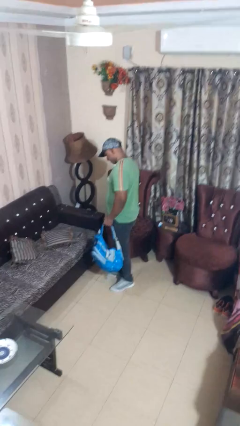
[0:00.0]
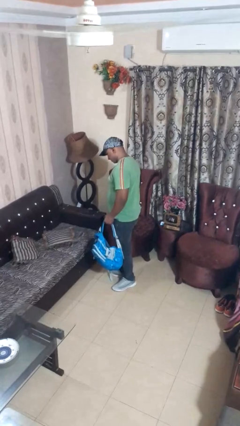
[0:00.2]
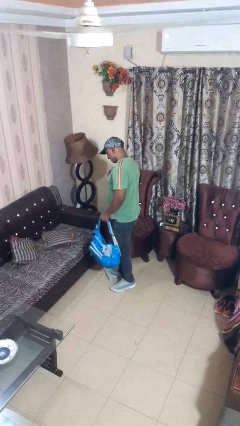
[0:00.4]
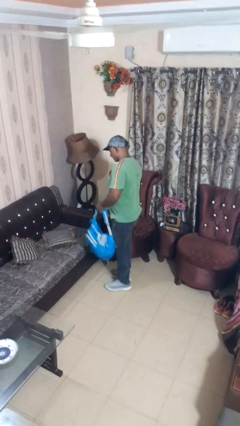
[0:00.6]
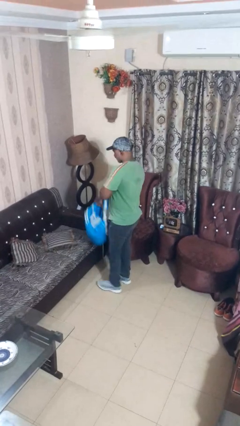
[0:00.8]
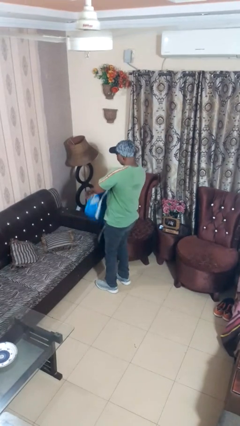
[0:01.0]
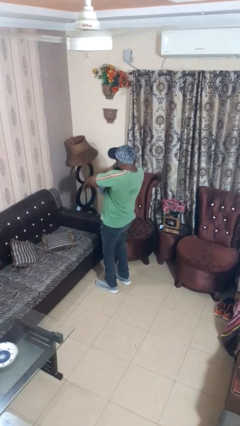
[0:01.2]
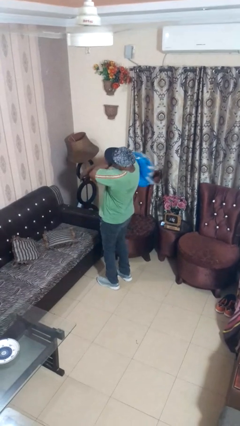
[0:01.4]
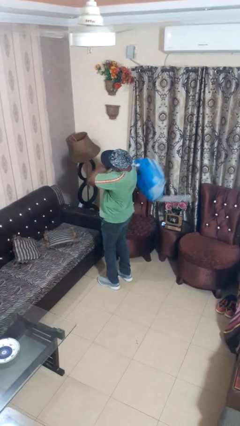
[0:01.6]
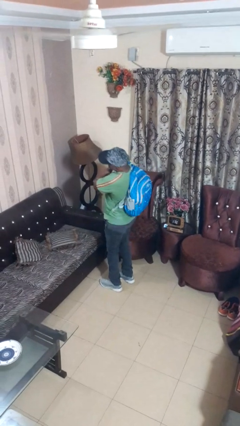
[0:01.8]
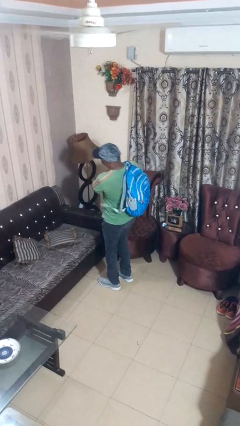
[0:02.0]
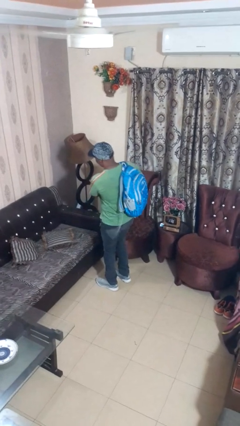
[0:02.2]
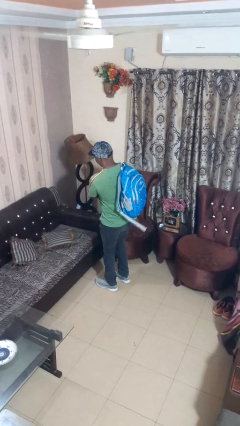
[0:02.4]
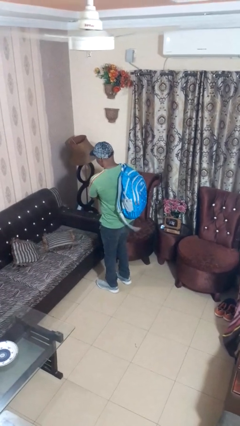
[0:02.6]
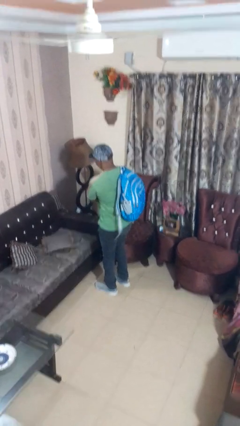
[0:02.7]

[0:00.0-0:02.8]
person puts on backpack

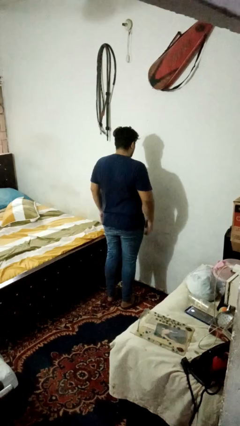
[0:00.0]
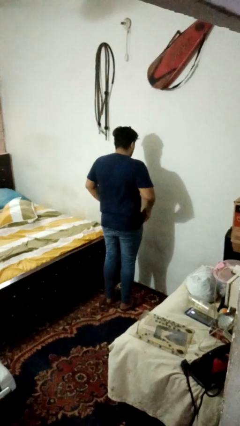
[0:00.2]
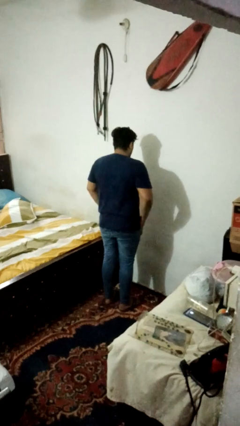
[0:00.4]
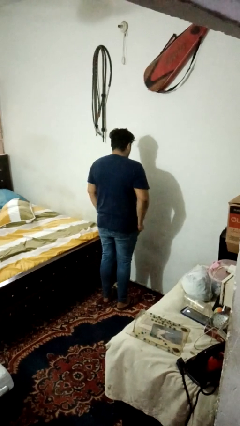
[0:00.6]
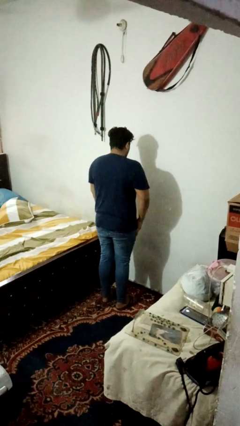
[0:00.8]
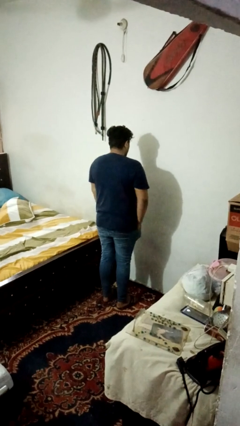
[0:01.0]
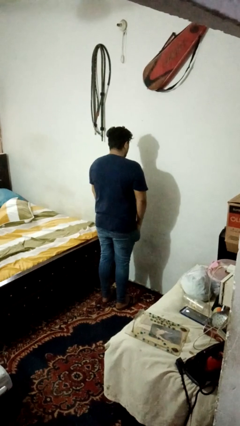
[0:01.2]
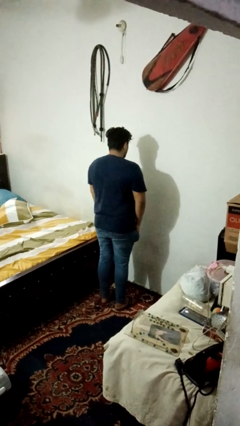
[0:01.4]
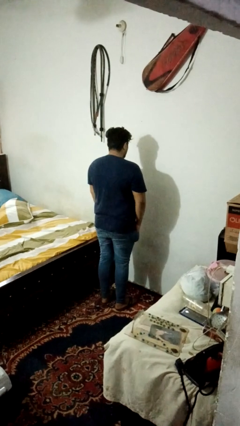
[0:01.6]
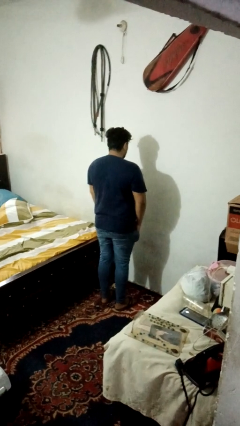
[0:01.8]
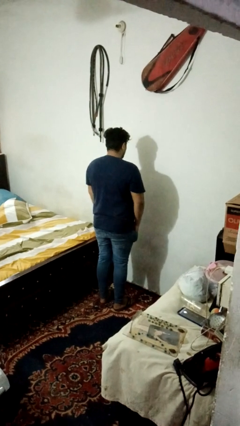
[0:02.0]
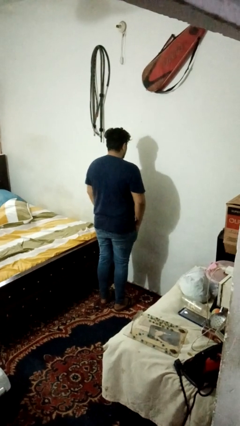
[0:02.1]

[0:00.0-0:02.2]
person puts hands in back pockets

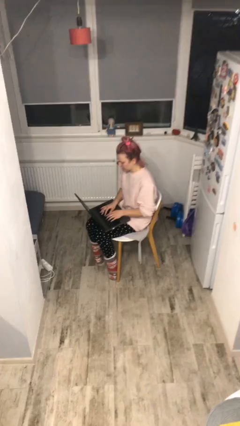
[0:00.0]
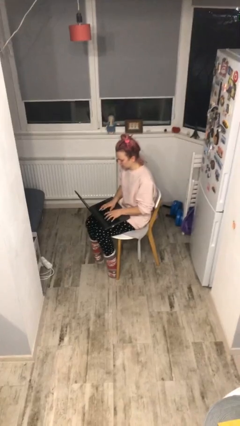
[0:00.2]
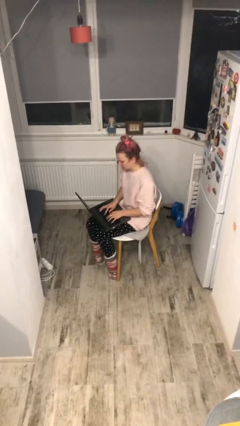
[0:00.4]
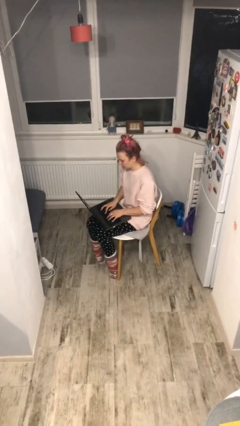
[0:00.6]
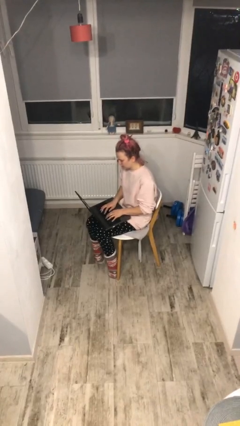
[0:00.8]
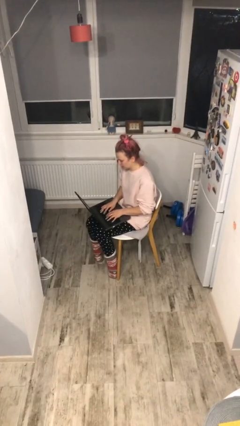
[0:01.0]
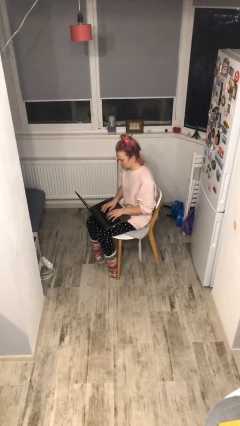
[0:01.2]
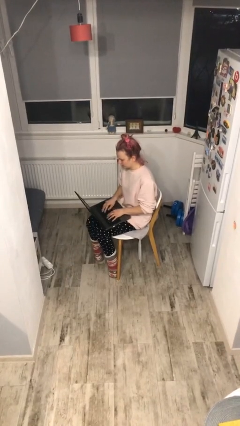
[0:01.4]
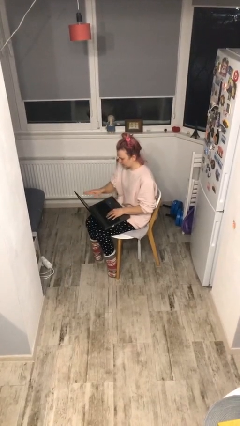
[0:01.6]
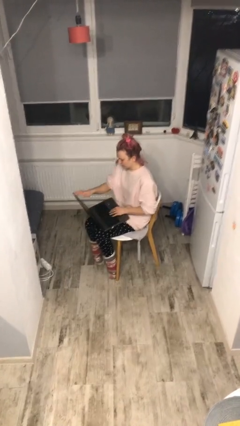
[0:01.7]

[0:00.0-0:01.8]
person interacts with laptop

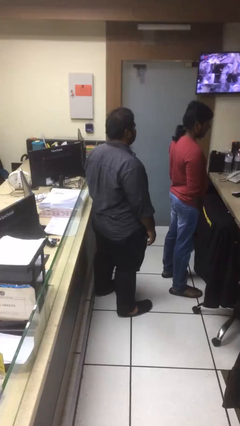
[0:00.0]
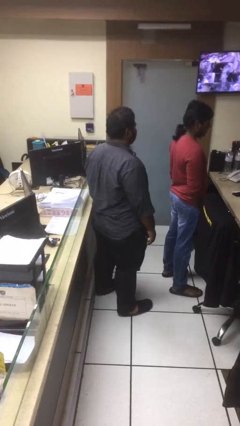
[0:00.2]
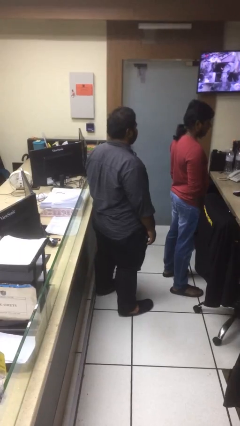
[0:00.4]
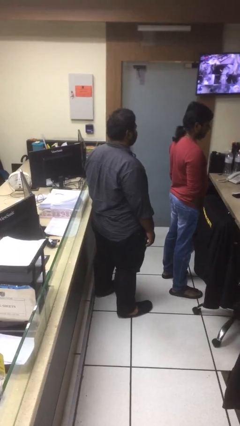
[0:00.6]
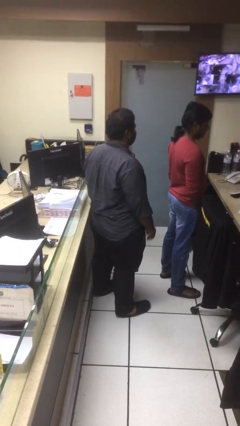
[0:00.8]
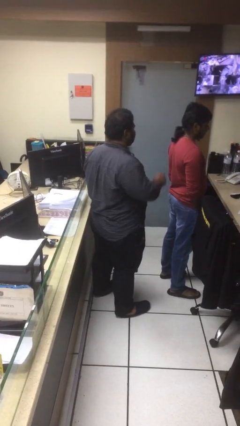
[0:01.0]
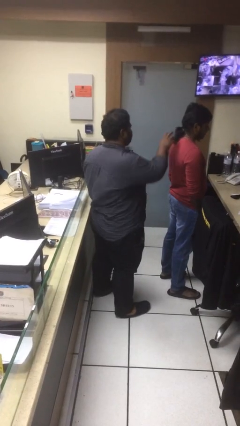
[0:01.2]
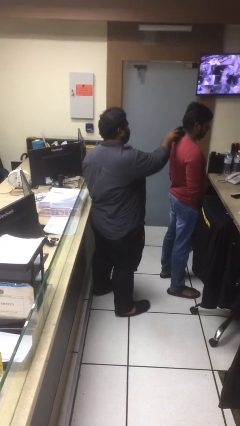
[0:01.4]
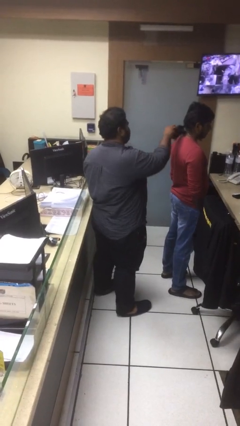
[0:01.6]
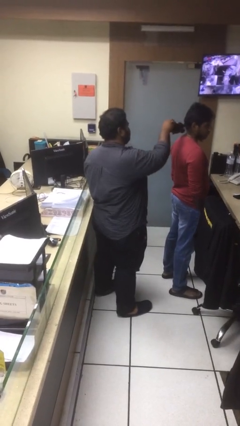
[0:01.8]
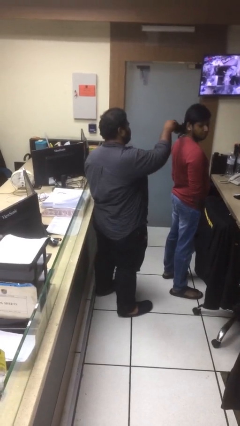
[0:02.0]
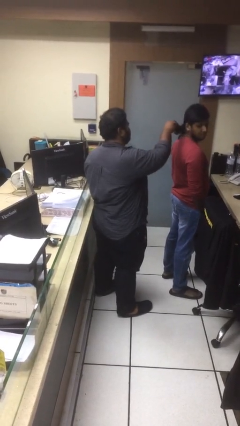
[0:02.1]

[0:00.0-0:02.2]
person grabs person by hair

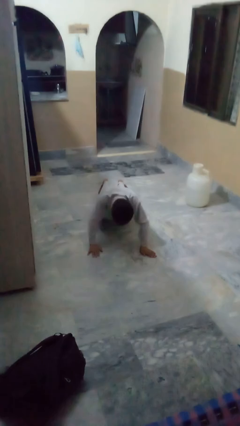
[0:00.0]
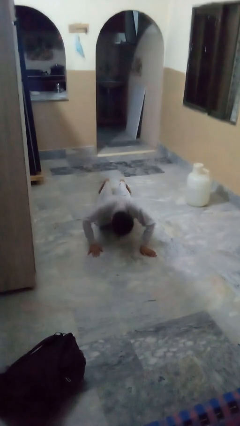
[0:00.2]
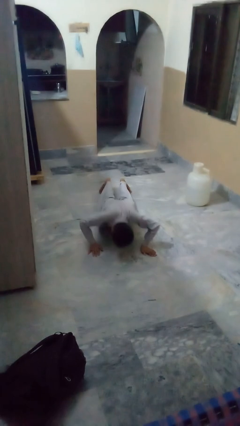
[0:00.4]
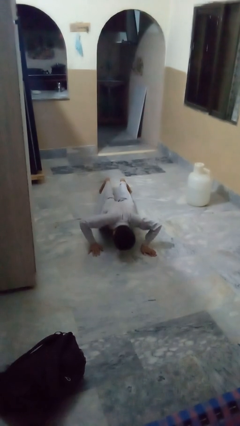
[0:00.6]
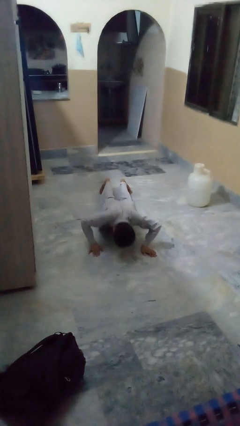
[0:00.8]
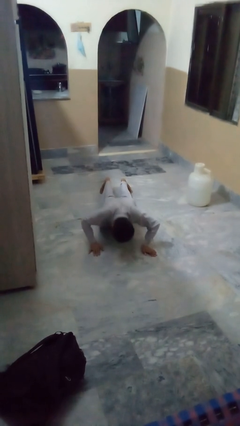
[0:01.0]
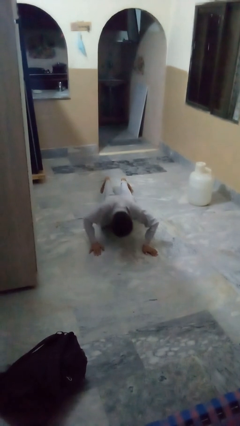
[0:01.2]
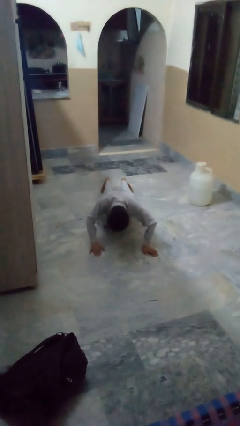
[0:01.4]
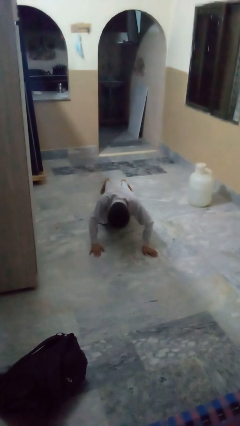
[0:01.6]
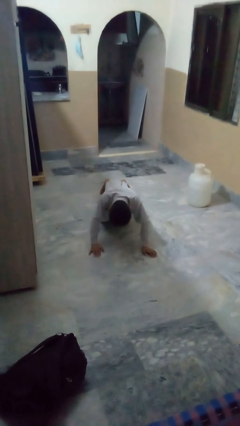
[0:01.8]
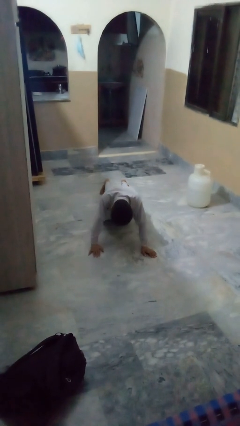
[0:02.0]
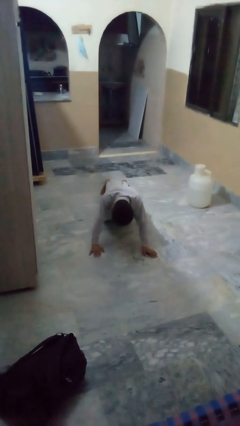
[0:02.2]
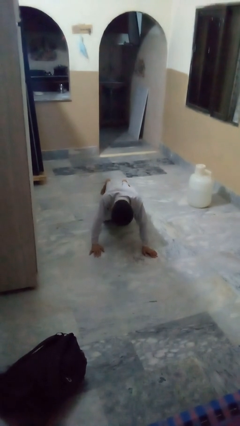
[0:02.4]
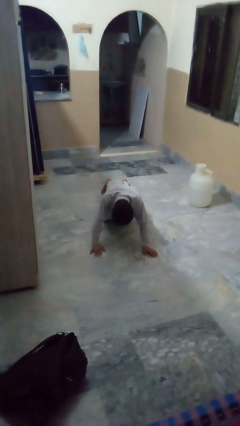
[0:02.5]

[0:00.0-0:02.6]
person exercises with pushup

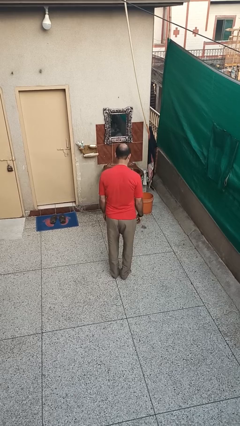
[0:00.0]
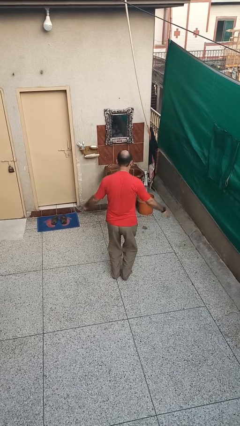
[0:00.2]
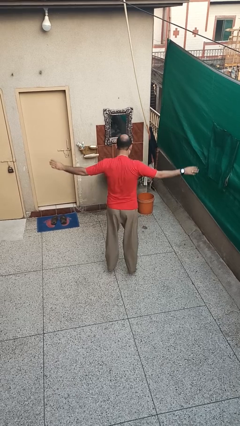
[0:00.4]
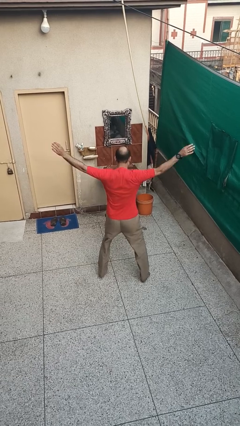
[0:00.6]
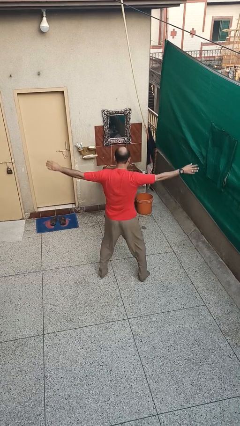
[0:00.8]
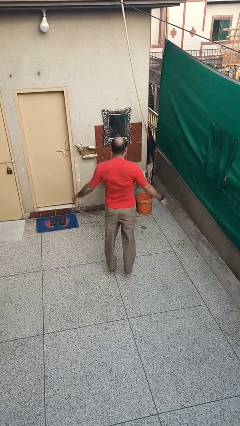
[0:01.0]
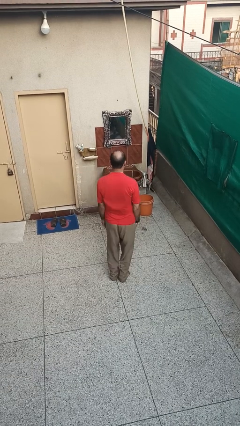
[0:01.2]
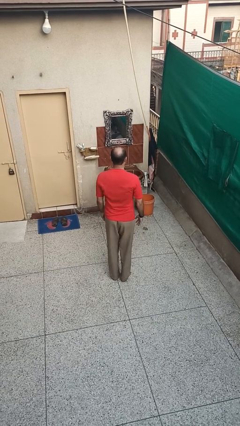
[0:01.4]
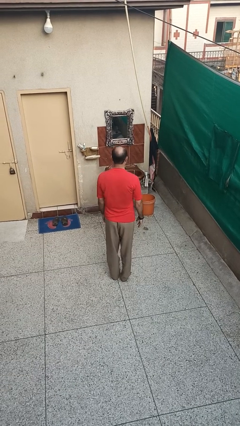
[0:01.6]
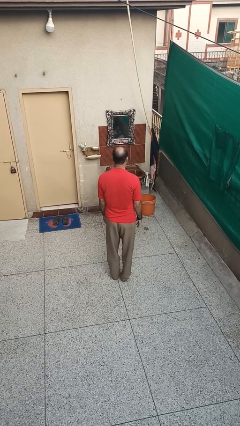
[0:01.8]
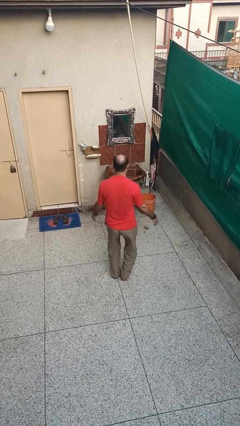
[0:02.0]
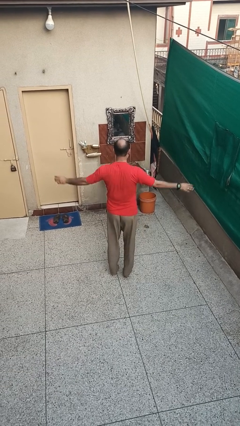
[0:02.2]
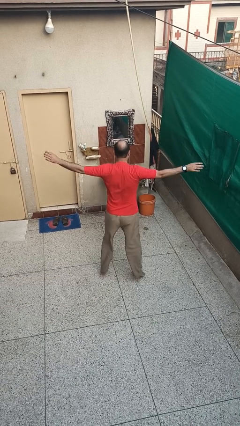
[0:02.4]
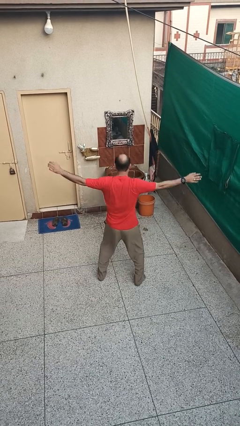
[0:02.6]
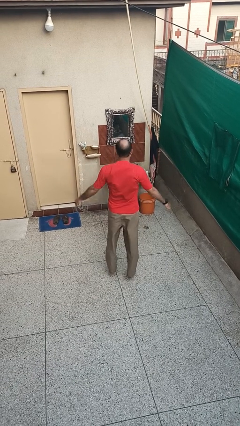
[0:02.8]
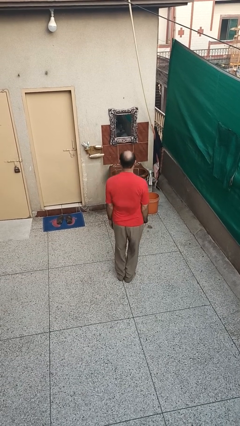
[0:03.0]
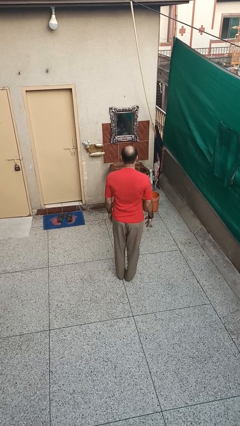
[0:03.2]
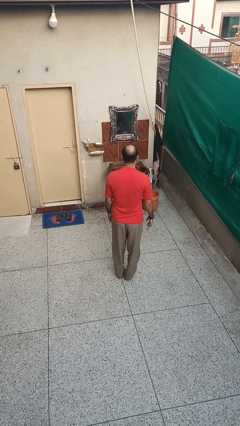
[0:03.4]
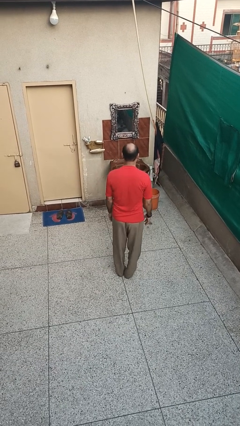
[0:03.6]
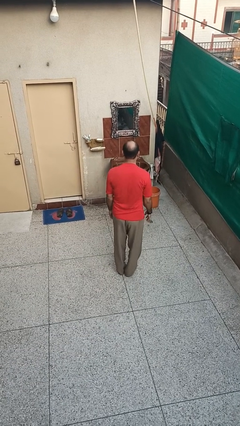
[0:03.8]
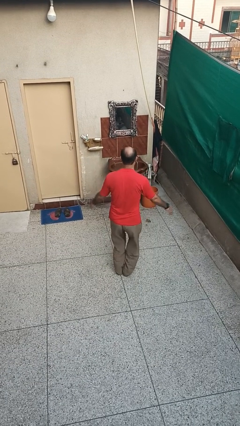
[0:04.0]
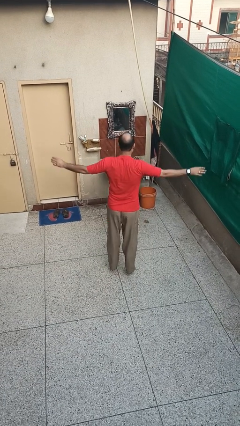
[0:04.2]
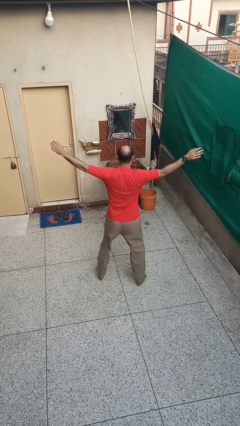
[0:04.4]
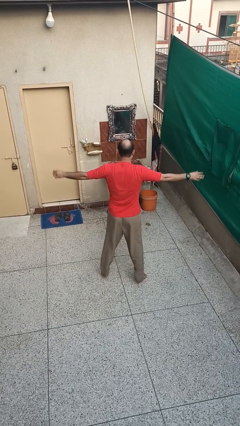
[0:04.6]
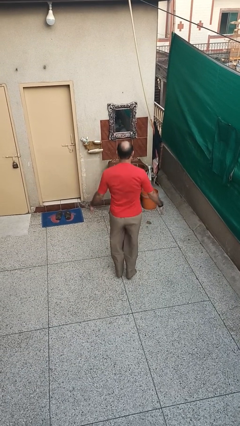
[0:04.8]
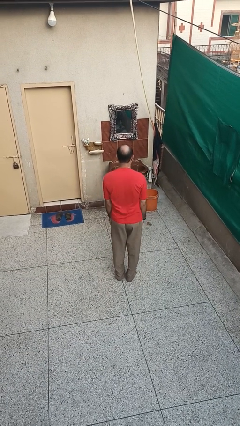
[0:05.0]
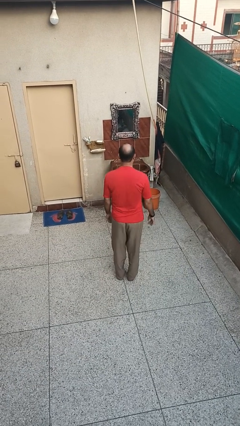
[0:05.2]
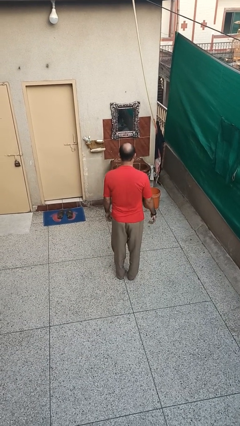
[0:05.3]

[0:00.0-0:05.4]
person exercises with jumping jacks
